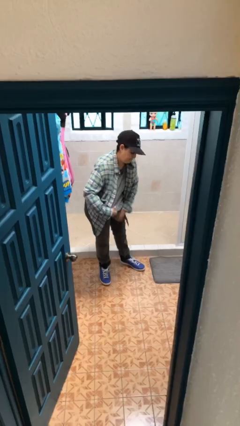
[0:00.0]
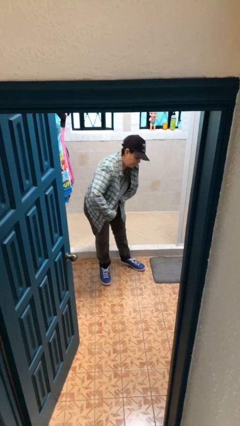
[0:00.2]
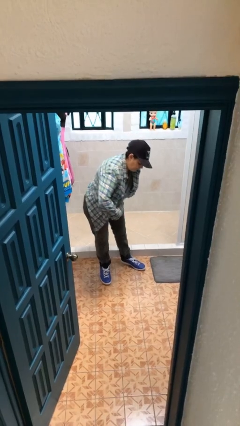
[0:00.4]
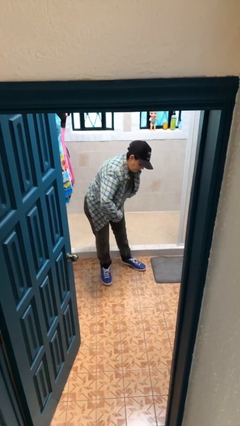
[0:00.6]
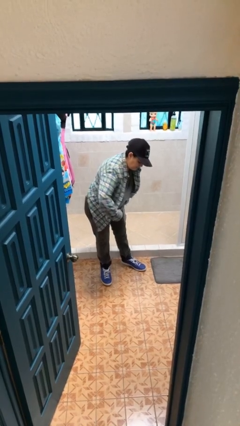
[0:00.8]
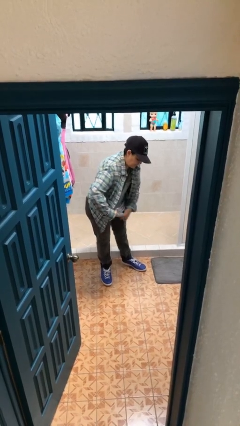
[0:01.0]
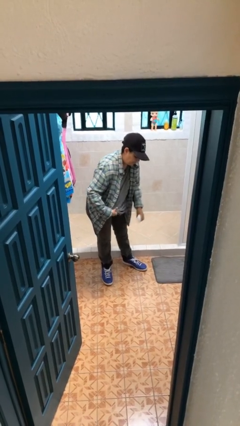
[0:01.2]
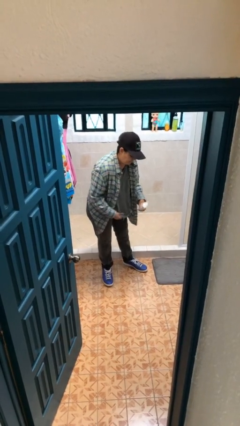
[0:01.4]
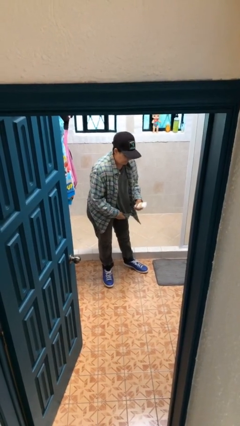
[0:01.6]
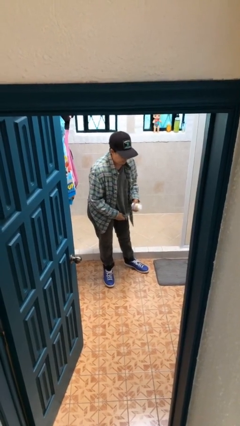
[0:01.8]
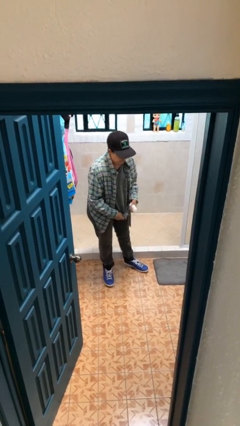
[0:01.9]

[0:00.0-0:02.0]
person applies deodorant

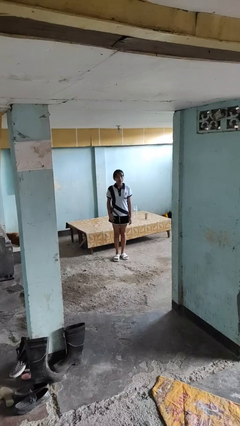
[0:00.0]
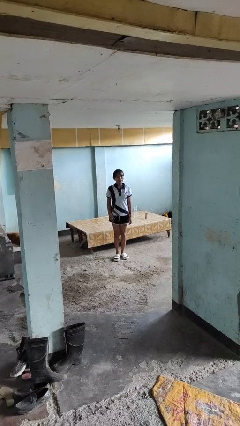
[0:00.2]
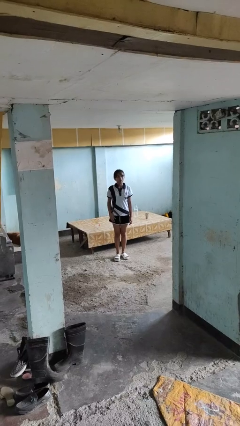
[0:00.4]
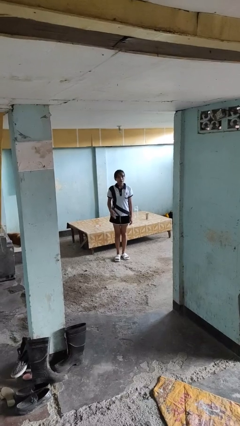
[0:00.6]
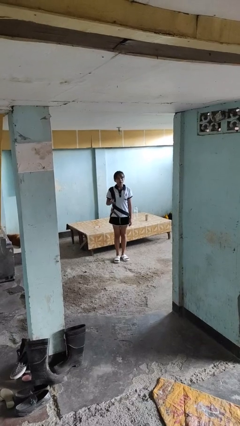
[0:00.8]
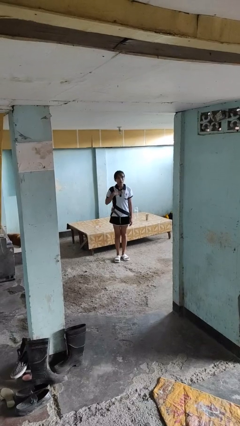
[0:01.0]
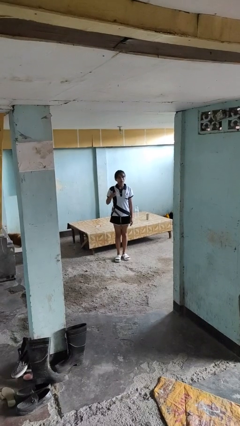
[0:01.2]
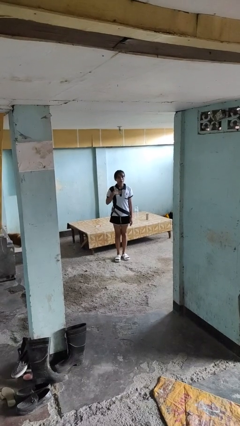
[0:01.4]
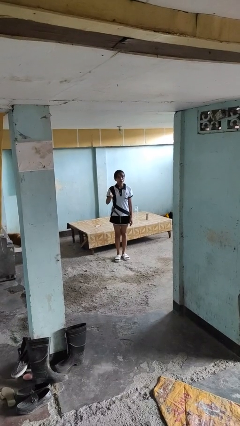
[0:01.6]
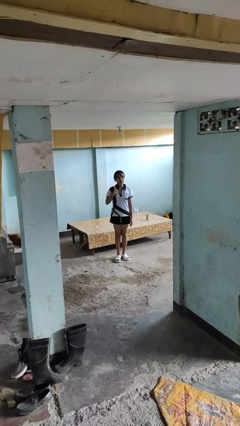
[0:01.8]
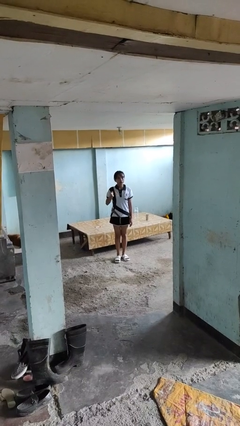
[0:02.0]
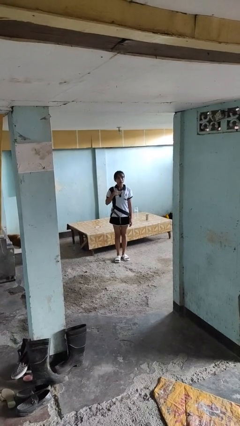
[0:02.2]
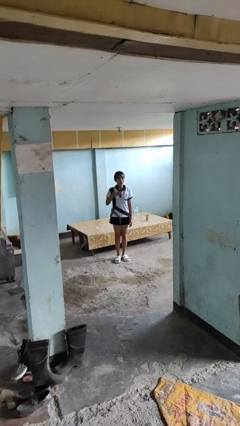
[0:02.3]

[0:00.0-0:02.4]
person drums on chest

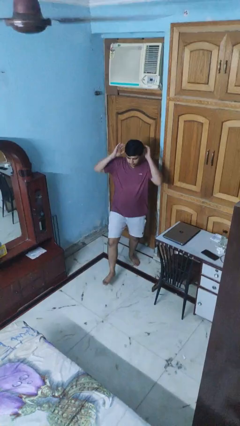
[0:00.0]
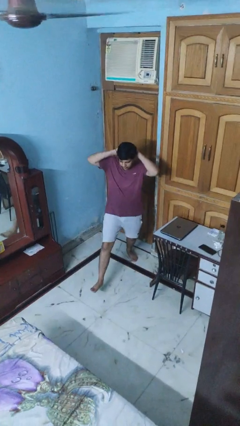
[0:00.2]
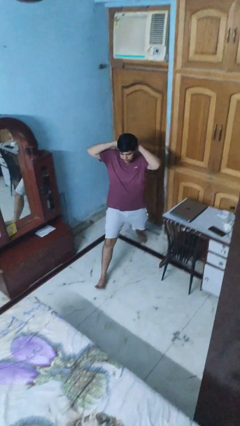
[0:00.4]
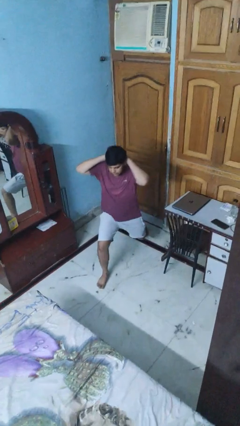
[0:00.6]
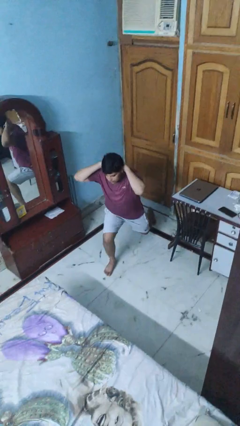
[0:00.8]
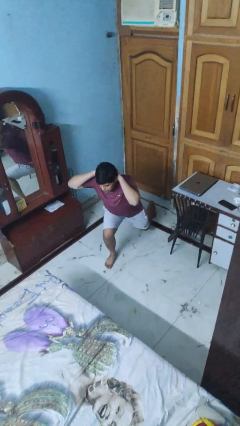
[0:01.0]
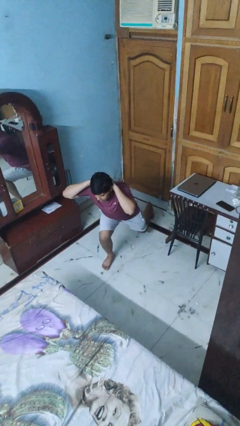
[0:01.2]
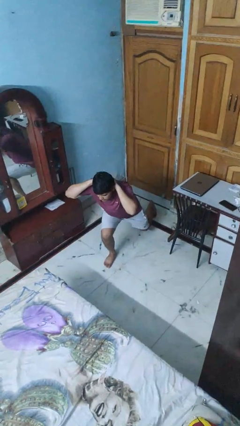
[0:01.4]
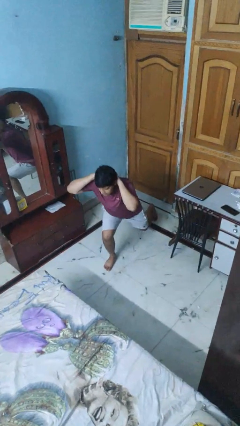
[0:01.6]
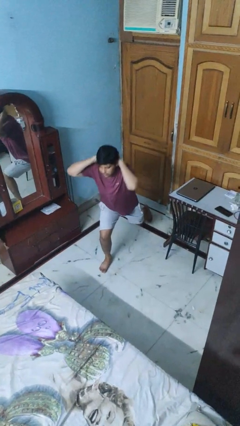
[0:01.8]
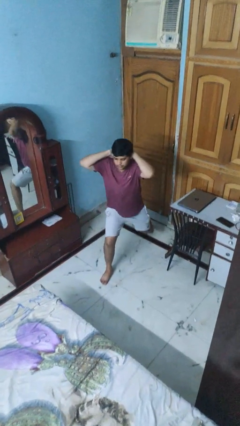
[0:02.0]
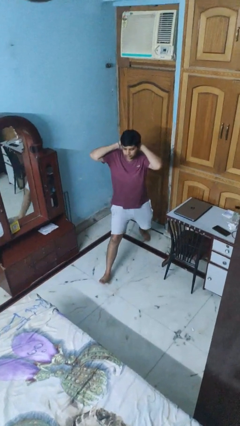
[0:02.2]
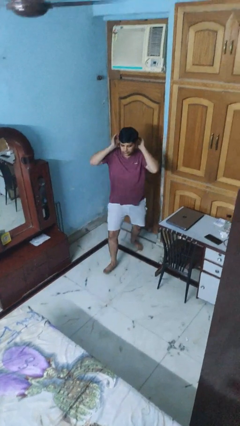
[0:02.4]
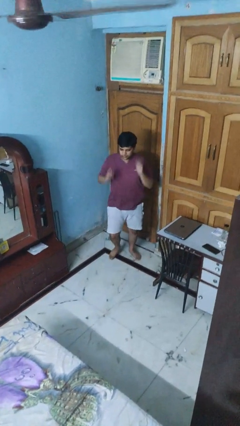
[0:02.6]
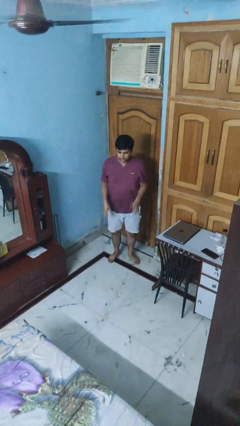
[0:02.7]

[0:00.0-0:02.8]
person exercises with lunges

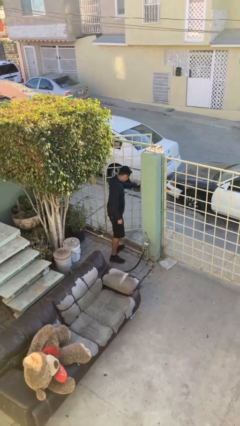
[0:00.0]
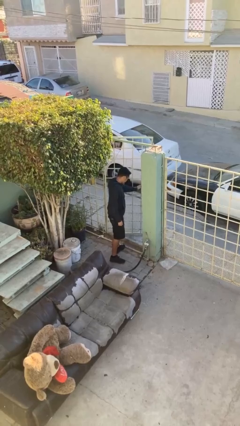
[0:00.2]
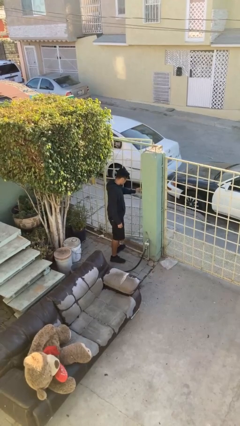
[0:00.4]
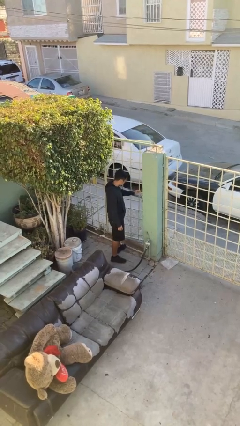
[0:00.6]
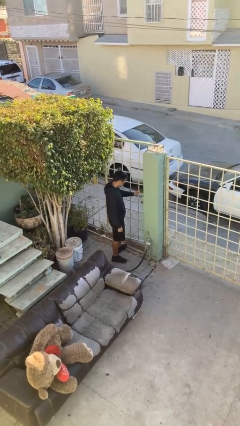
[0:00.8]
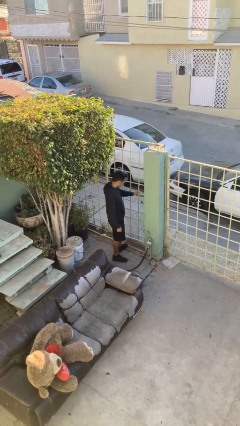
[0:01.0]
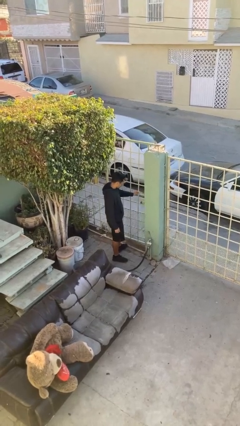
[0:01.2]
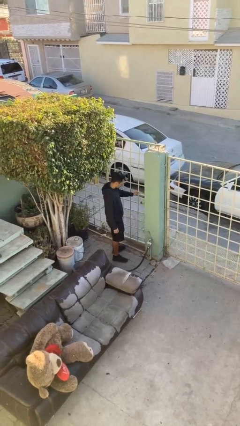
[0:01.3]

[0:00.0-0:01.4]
person closes facility door

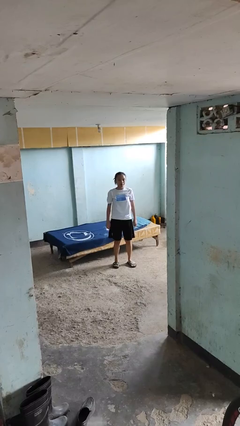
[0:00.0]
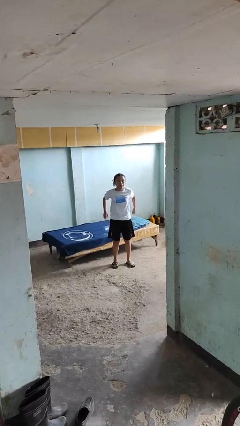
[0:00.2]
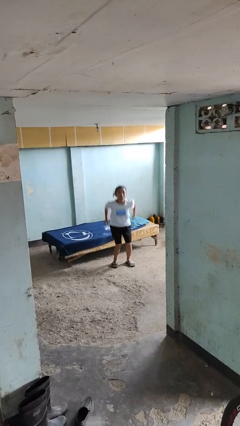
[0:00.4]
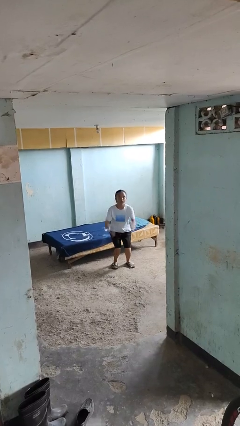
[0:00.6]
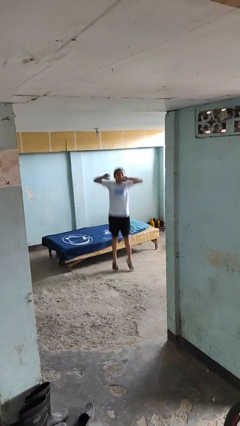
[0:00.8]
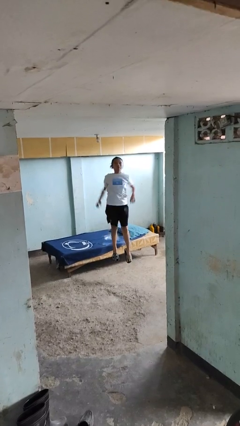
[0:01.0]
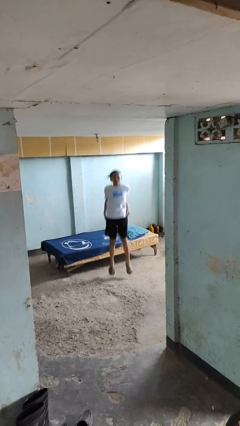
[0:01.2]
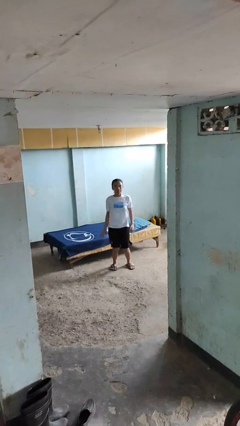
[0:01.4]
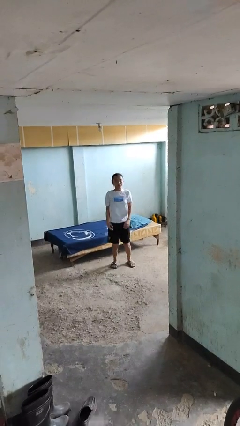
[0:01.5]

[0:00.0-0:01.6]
person jumps

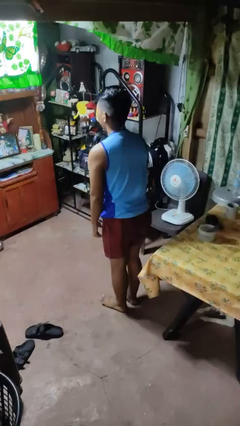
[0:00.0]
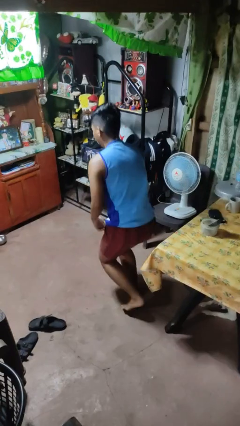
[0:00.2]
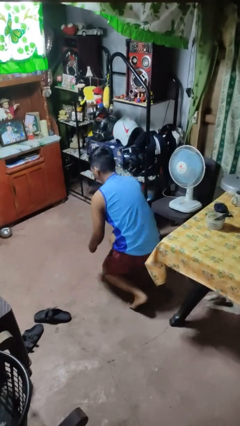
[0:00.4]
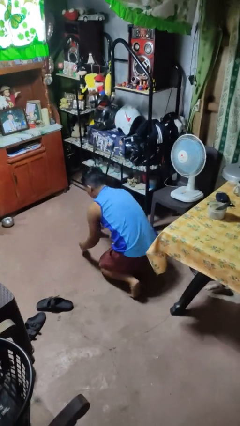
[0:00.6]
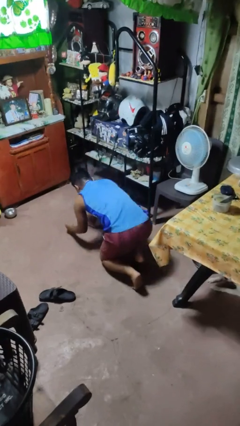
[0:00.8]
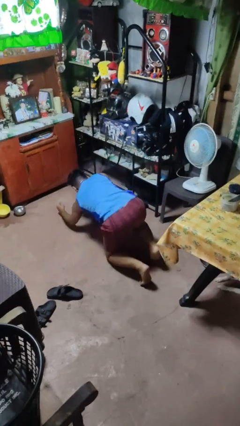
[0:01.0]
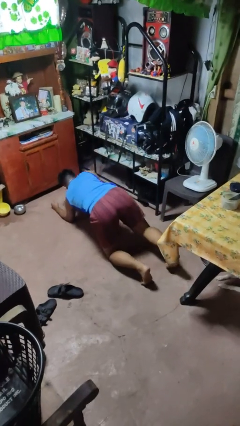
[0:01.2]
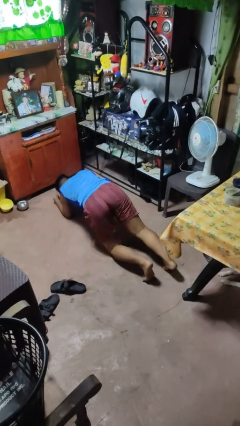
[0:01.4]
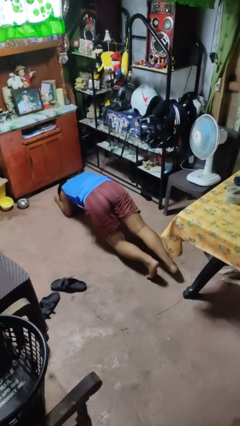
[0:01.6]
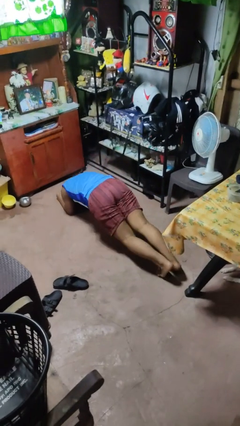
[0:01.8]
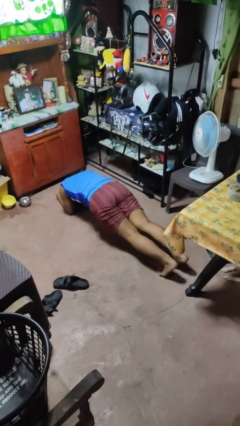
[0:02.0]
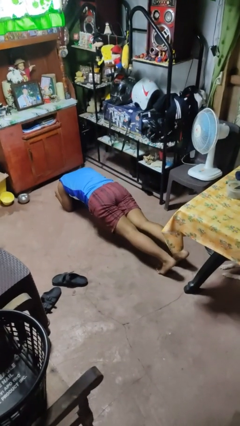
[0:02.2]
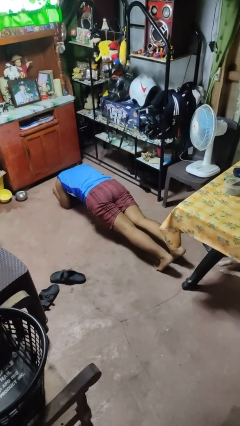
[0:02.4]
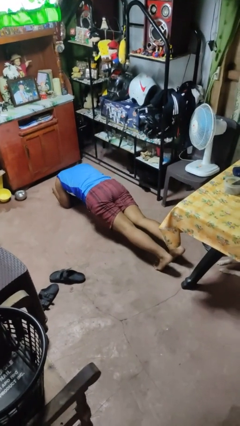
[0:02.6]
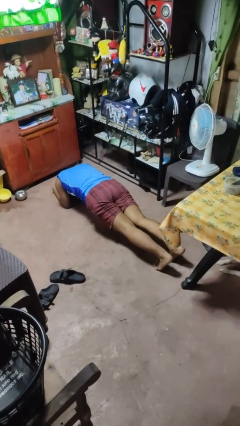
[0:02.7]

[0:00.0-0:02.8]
person exercises with plank

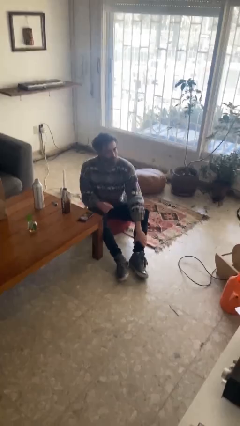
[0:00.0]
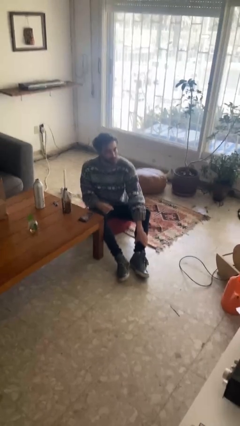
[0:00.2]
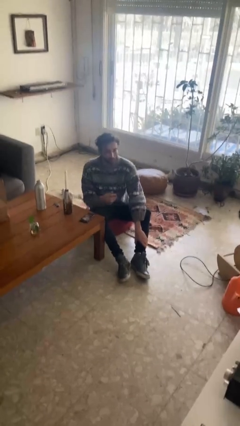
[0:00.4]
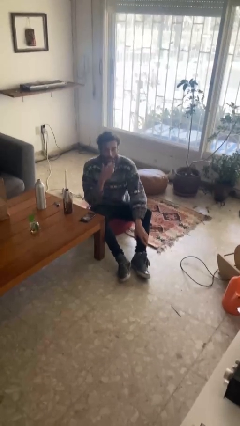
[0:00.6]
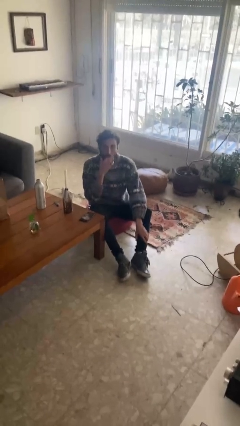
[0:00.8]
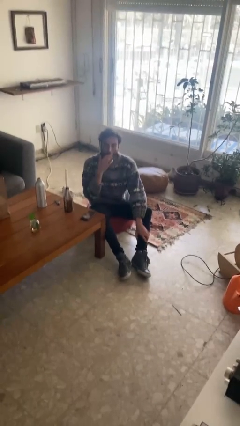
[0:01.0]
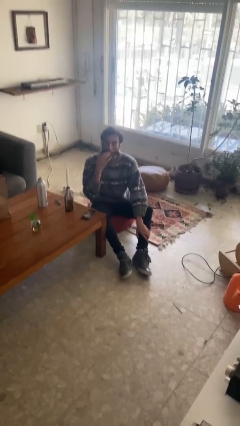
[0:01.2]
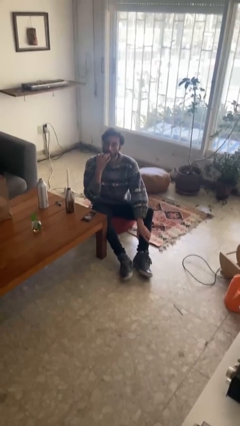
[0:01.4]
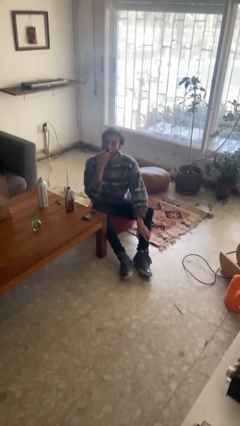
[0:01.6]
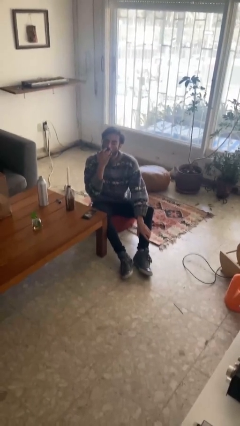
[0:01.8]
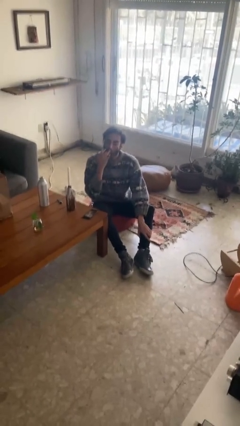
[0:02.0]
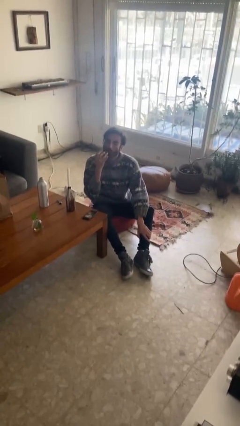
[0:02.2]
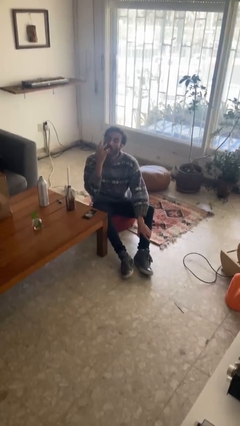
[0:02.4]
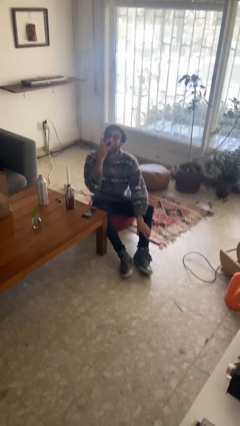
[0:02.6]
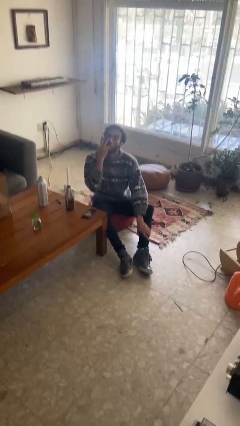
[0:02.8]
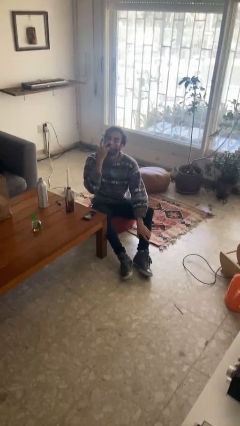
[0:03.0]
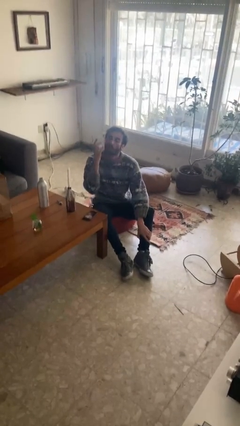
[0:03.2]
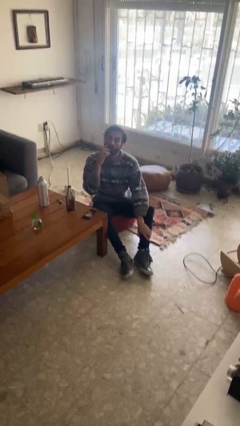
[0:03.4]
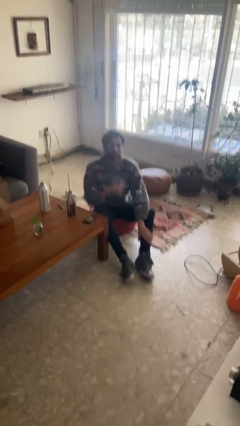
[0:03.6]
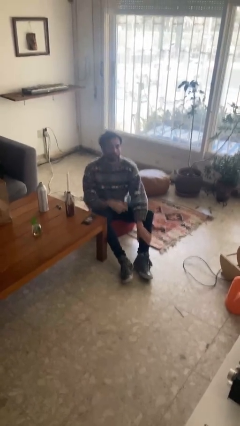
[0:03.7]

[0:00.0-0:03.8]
person licks fingers

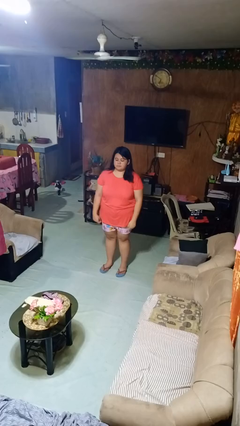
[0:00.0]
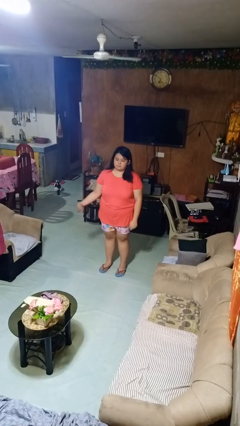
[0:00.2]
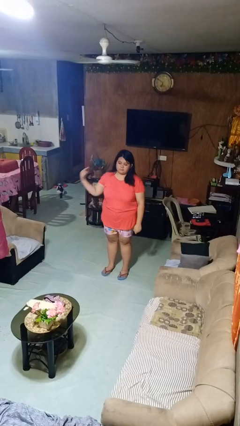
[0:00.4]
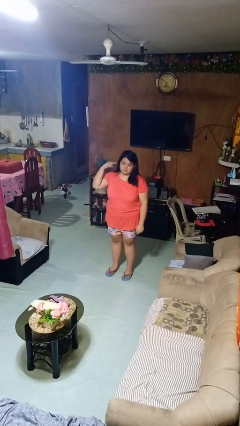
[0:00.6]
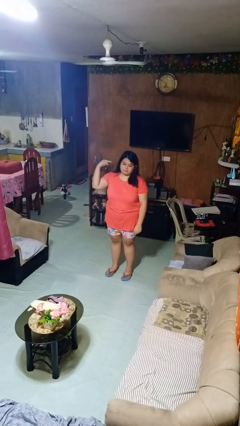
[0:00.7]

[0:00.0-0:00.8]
person gestures listen closely
